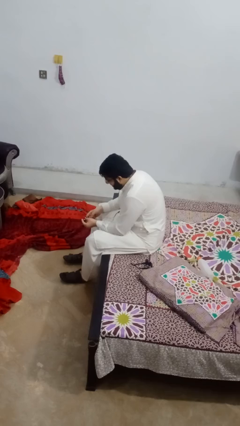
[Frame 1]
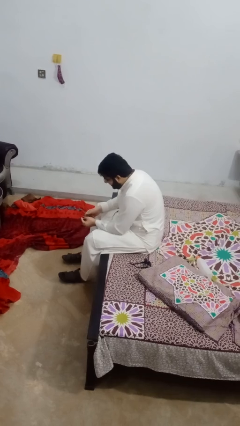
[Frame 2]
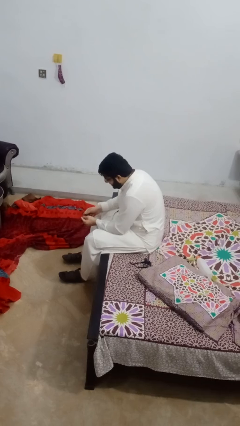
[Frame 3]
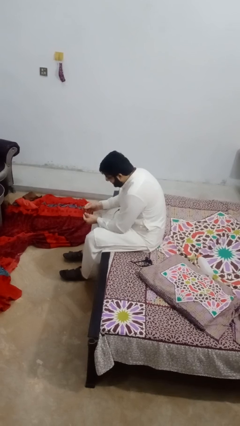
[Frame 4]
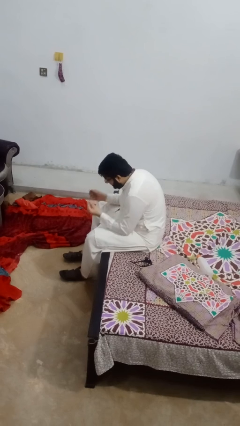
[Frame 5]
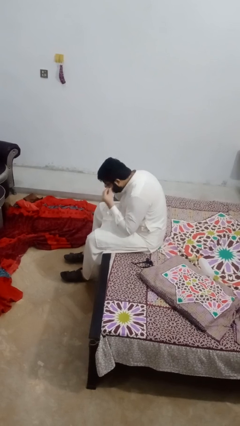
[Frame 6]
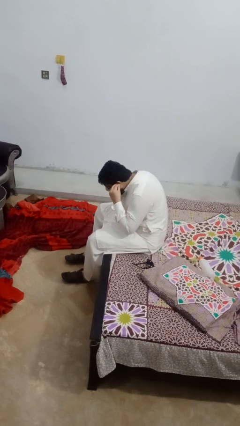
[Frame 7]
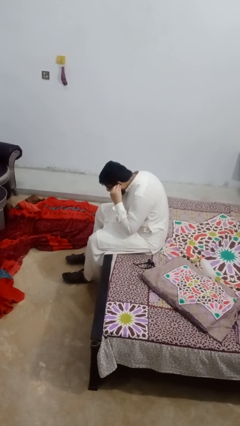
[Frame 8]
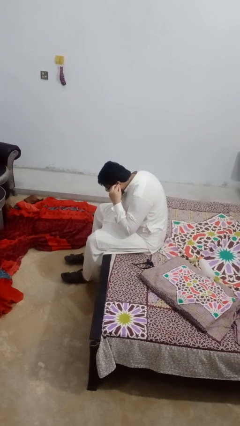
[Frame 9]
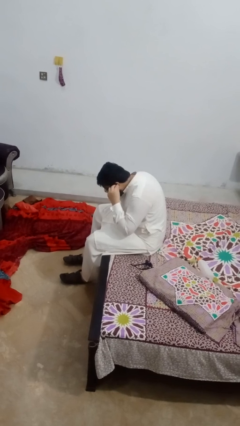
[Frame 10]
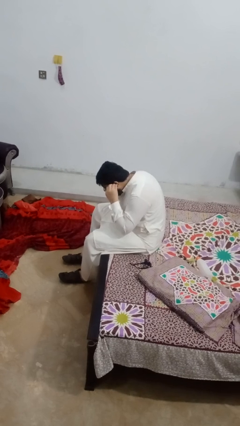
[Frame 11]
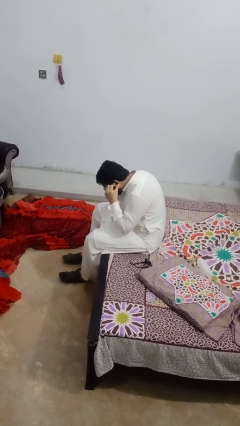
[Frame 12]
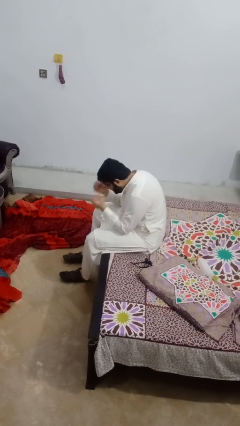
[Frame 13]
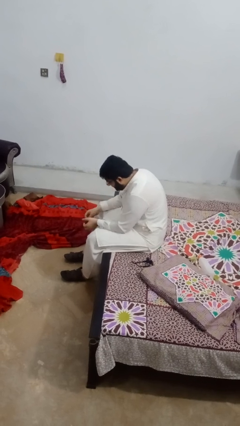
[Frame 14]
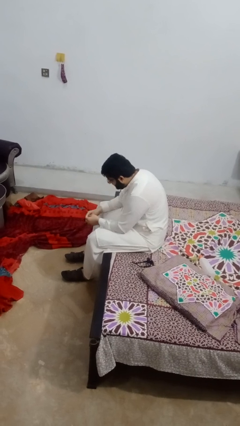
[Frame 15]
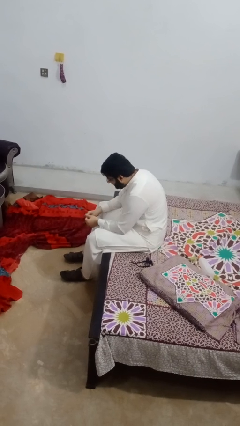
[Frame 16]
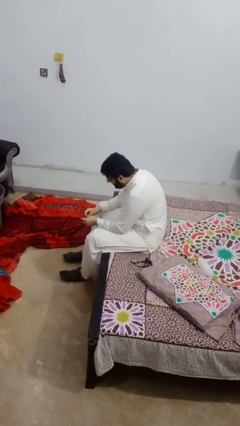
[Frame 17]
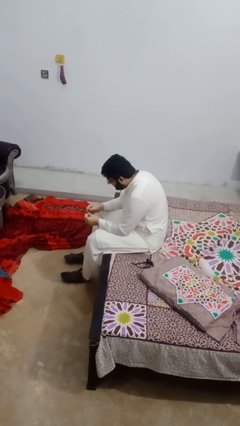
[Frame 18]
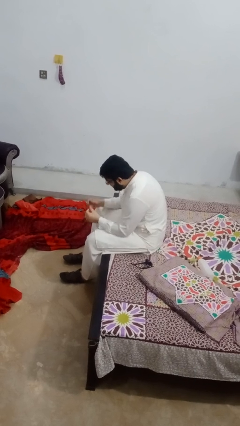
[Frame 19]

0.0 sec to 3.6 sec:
person puts on headphones

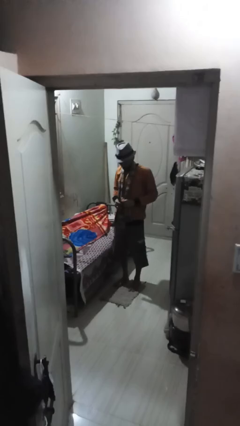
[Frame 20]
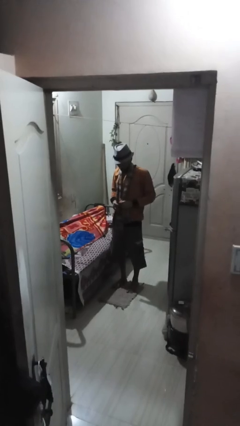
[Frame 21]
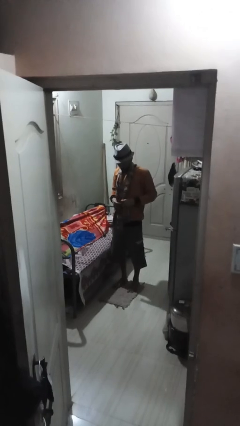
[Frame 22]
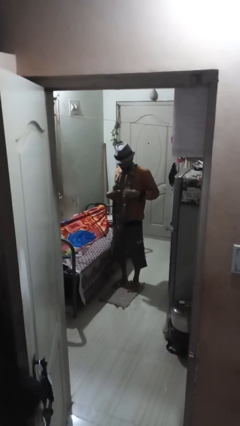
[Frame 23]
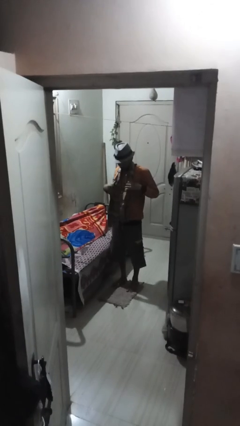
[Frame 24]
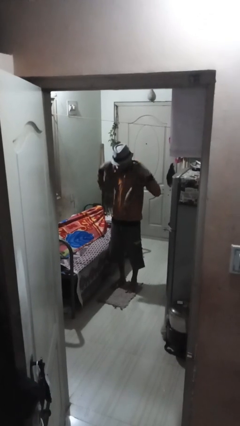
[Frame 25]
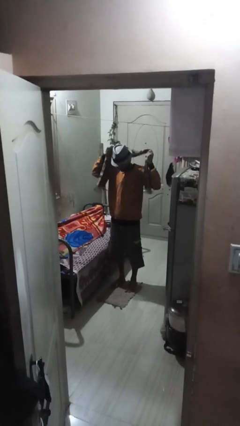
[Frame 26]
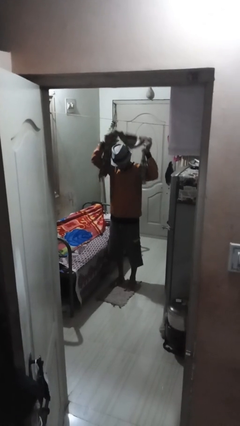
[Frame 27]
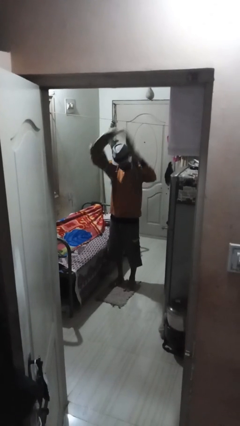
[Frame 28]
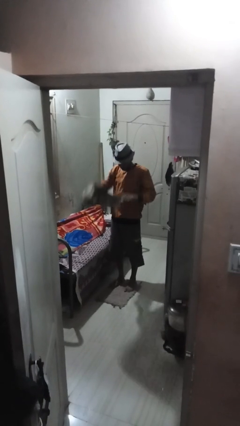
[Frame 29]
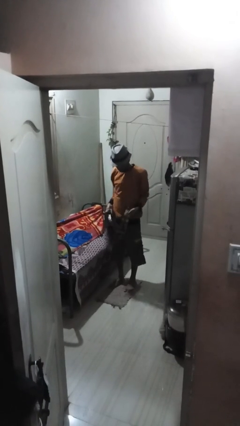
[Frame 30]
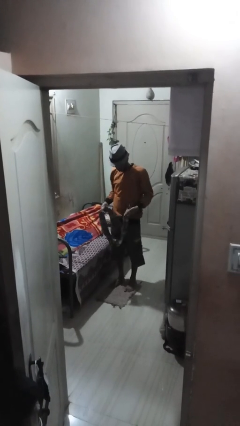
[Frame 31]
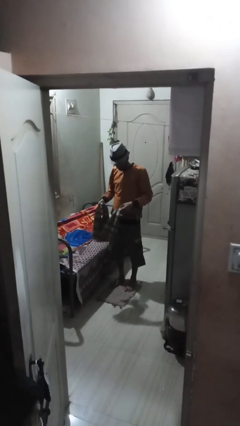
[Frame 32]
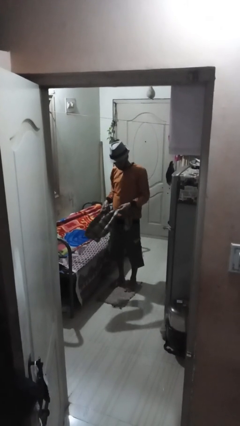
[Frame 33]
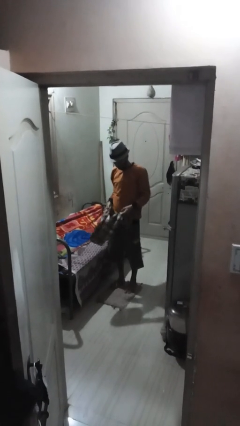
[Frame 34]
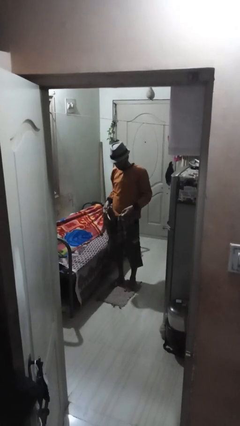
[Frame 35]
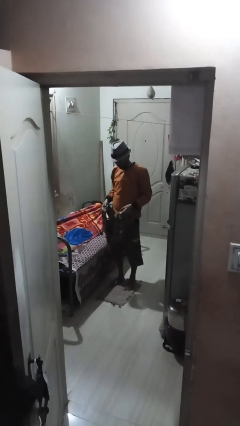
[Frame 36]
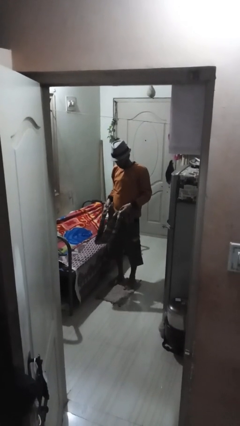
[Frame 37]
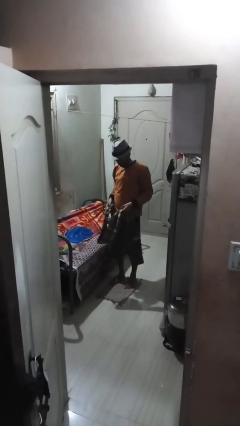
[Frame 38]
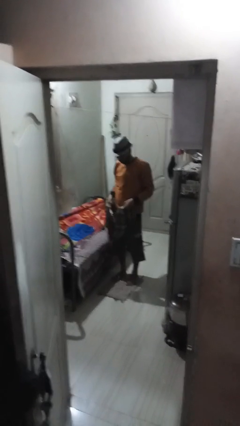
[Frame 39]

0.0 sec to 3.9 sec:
person takes off scarf

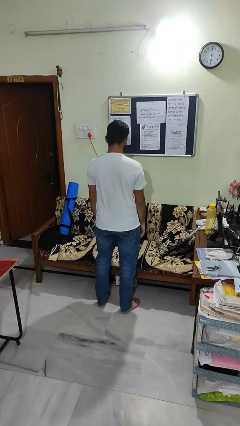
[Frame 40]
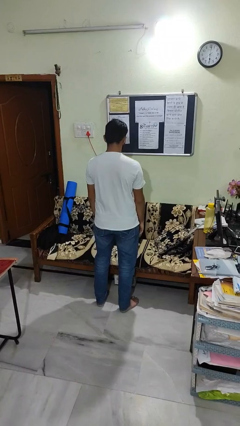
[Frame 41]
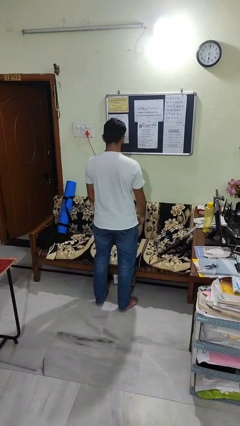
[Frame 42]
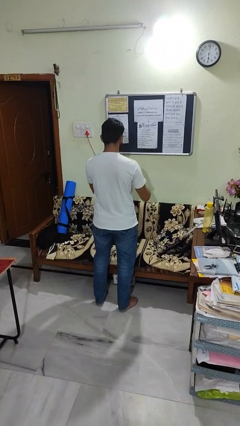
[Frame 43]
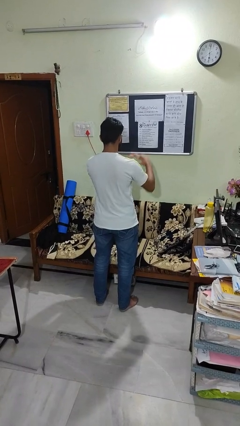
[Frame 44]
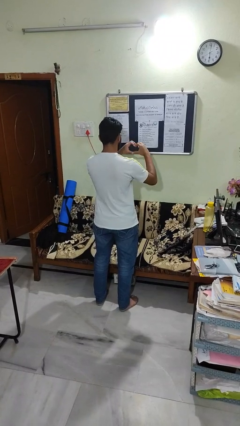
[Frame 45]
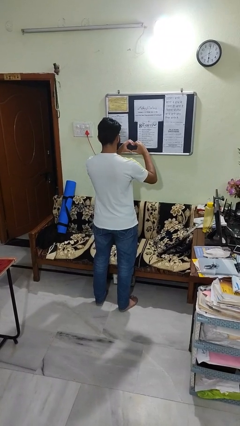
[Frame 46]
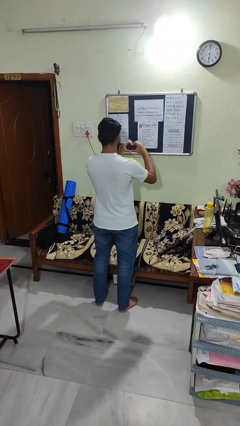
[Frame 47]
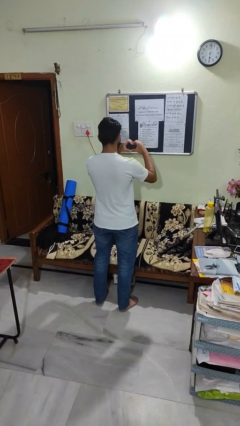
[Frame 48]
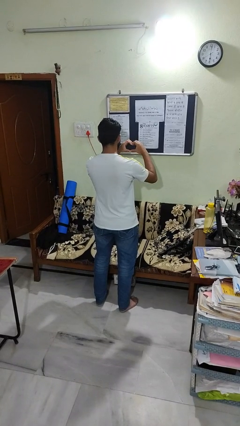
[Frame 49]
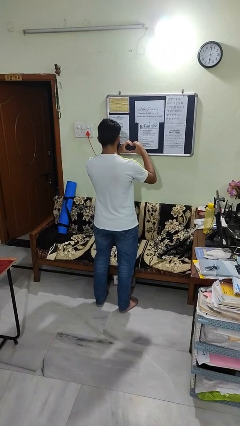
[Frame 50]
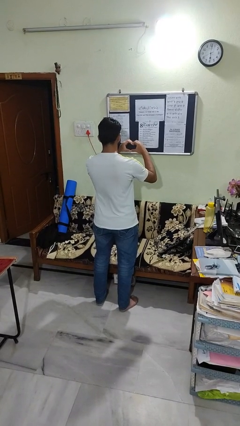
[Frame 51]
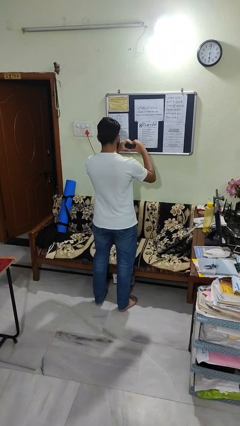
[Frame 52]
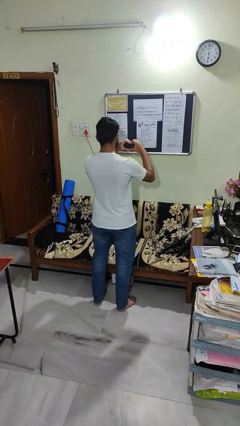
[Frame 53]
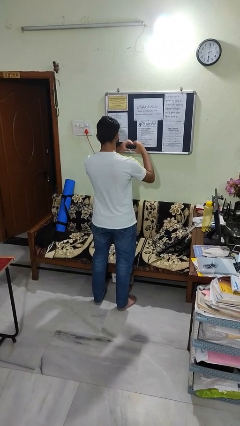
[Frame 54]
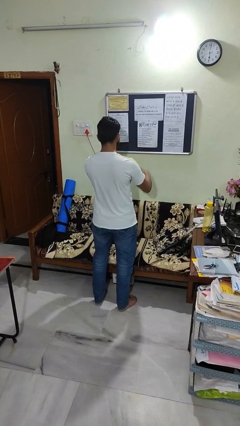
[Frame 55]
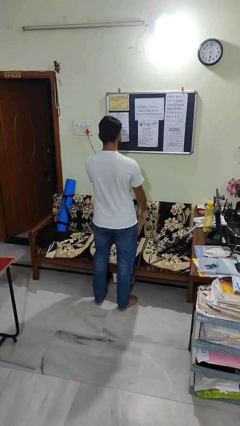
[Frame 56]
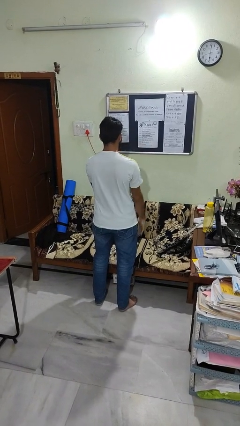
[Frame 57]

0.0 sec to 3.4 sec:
person gestures heart

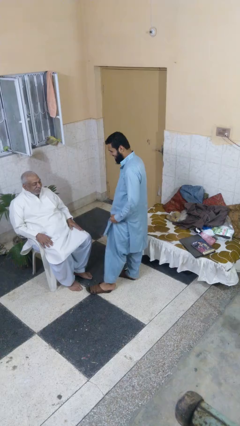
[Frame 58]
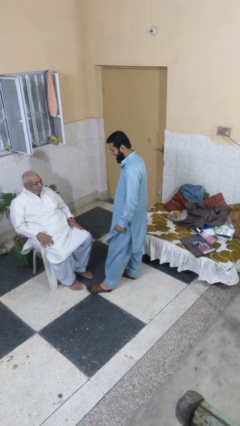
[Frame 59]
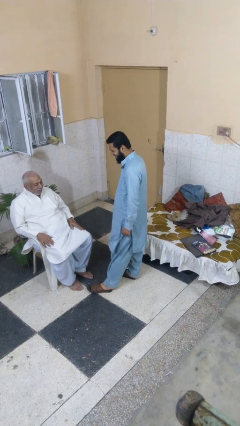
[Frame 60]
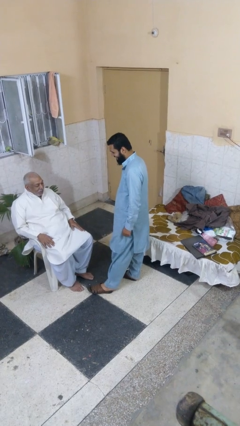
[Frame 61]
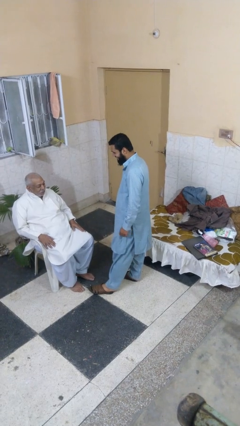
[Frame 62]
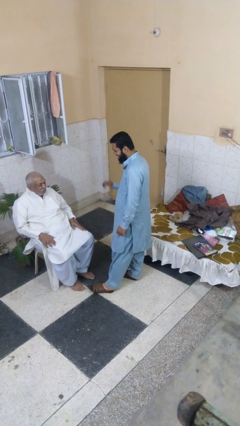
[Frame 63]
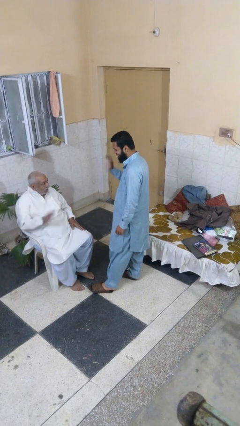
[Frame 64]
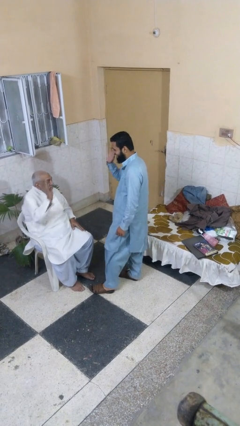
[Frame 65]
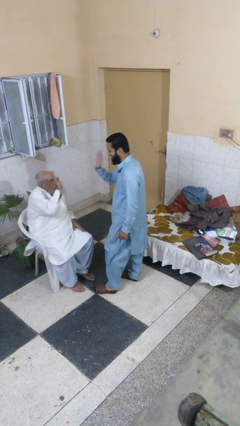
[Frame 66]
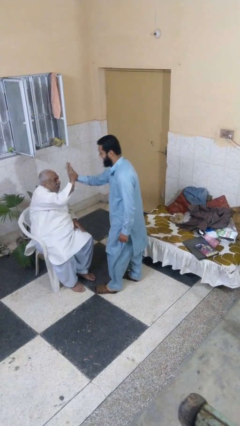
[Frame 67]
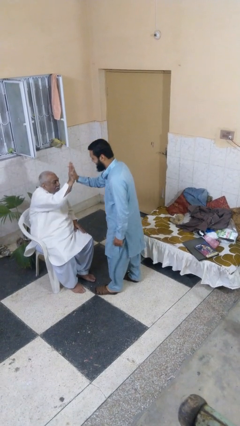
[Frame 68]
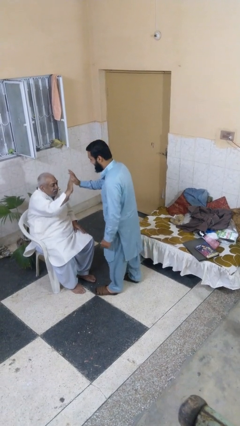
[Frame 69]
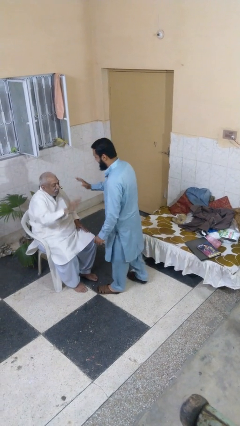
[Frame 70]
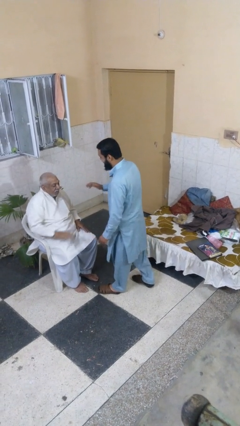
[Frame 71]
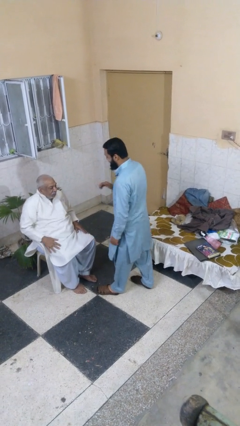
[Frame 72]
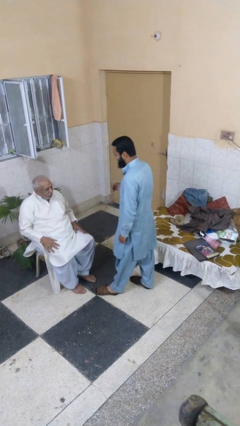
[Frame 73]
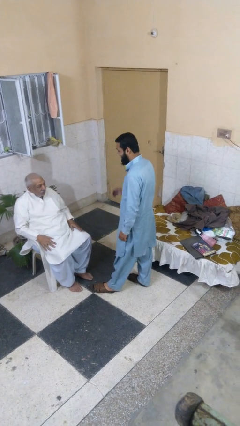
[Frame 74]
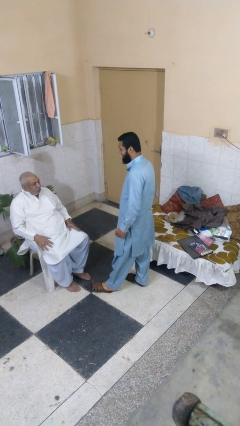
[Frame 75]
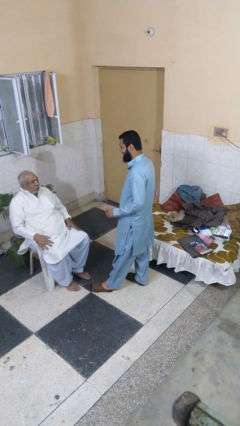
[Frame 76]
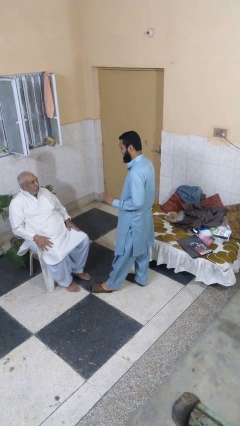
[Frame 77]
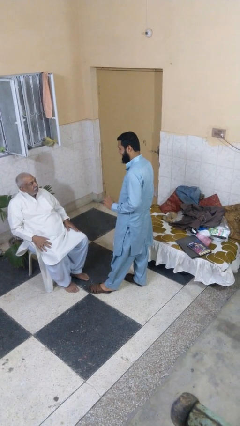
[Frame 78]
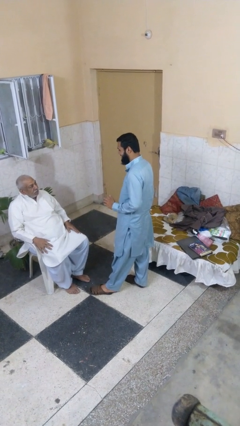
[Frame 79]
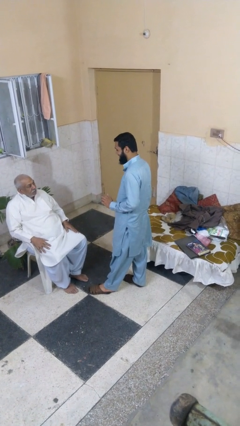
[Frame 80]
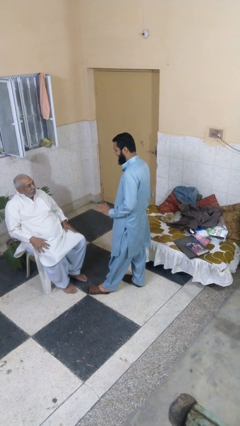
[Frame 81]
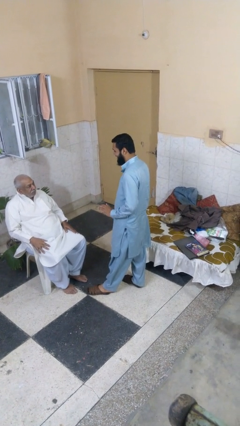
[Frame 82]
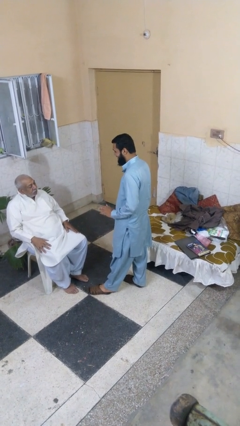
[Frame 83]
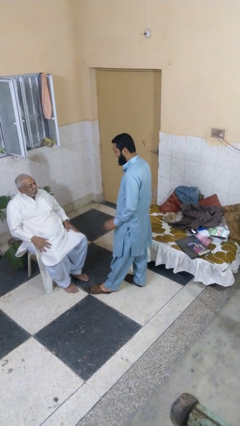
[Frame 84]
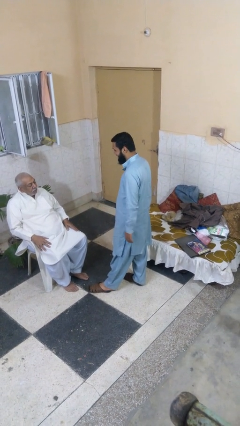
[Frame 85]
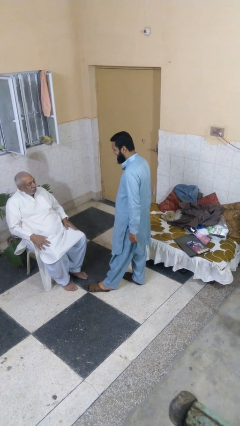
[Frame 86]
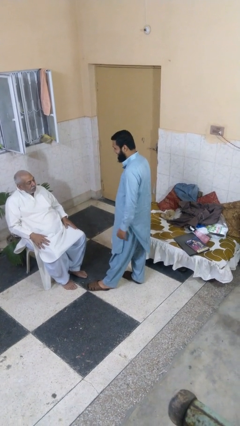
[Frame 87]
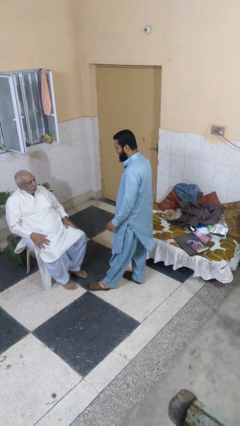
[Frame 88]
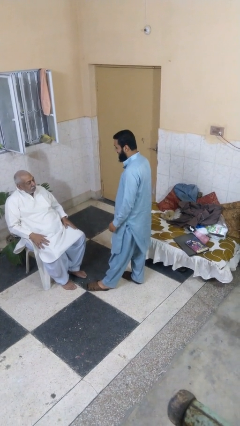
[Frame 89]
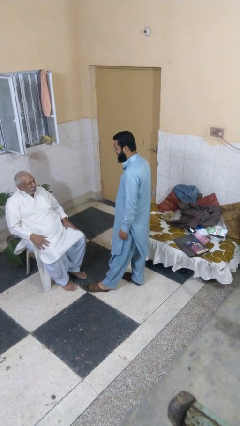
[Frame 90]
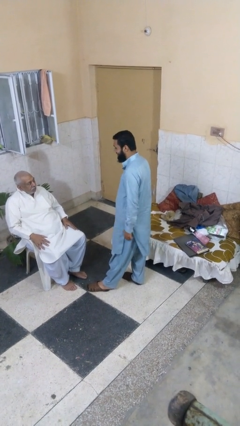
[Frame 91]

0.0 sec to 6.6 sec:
person highfives hand

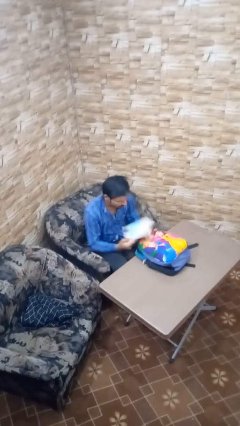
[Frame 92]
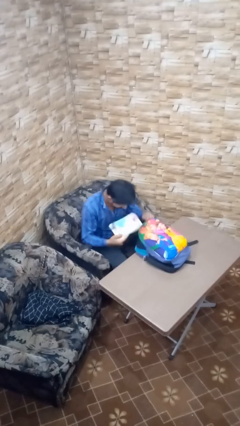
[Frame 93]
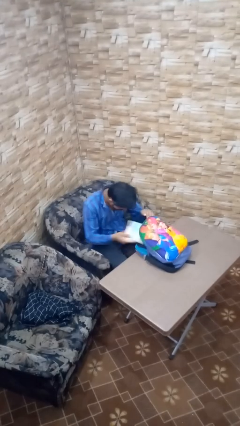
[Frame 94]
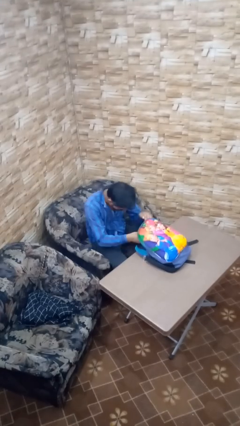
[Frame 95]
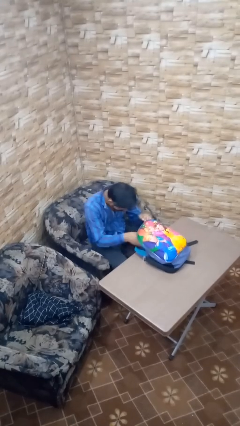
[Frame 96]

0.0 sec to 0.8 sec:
person puts object into backpack
